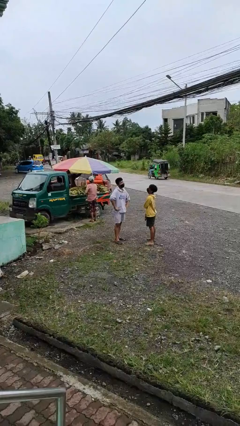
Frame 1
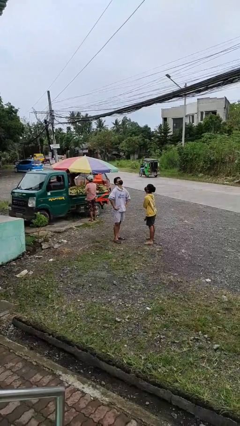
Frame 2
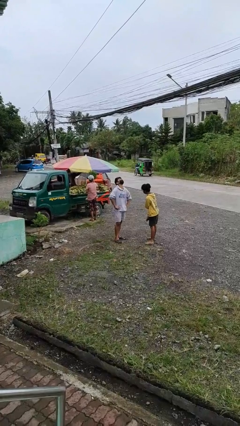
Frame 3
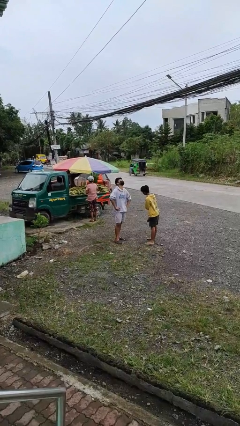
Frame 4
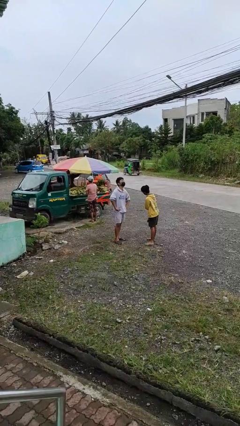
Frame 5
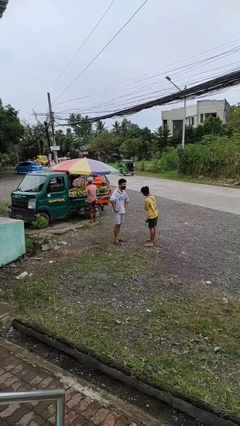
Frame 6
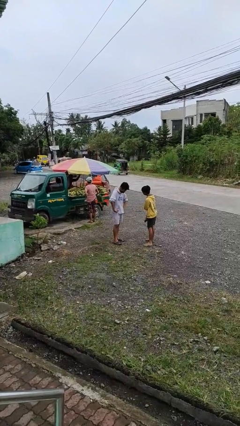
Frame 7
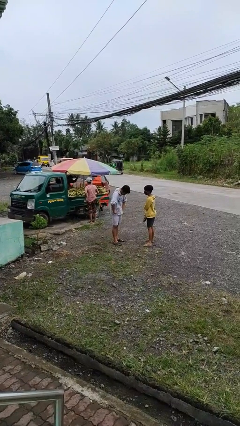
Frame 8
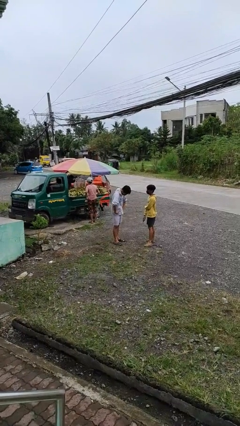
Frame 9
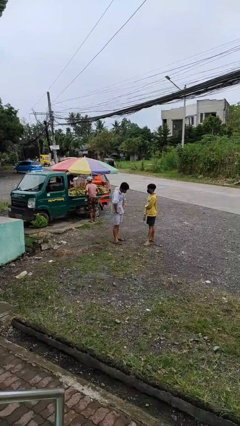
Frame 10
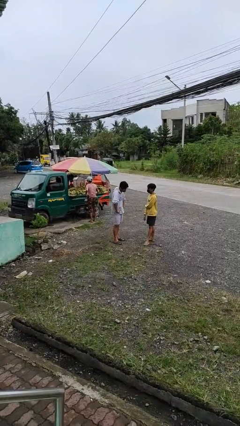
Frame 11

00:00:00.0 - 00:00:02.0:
person laughs with person

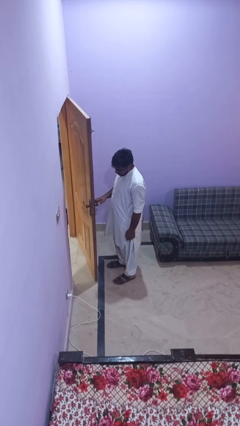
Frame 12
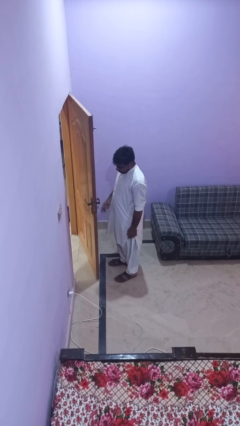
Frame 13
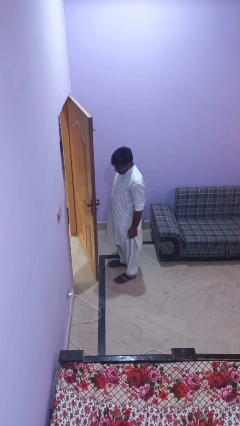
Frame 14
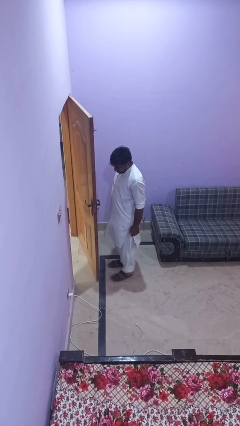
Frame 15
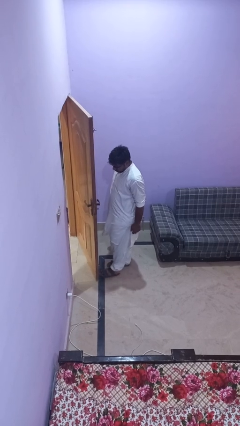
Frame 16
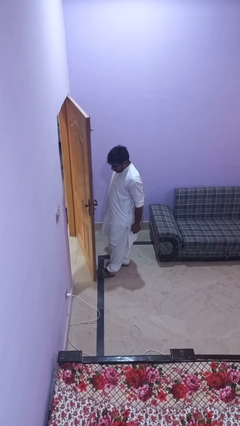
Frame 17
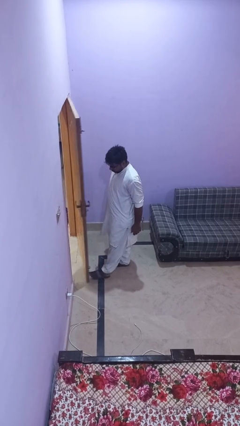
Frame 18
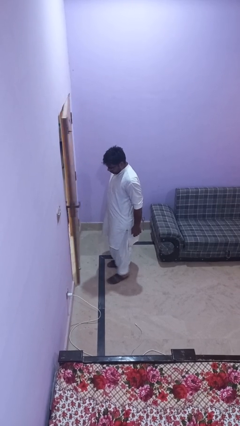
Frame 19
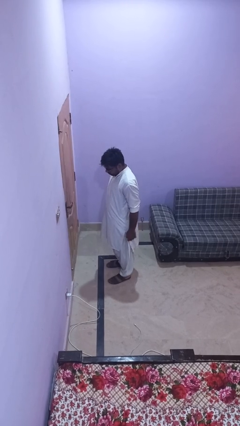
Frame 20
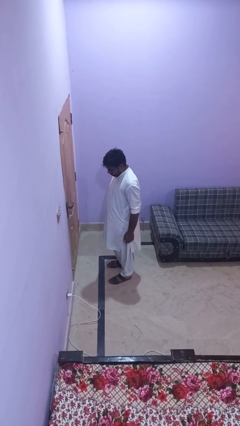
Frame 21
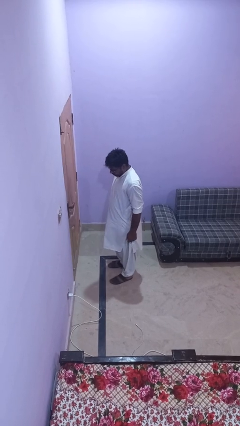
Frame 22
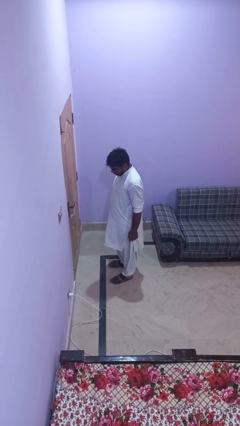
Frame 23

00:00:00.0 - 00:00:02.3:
person closes door with foot

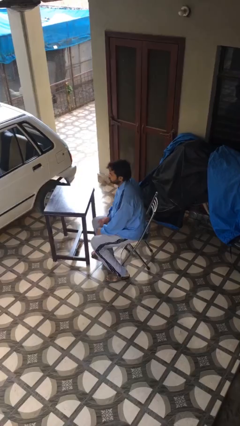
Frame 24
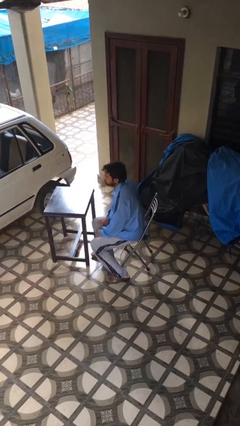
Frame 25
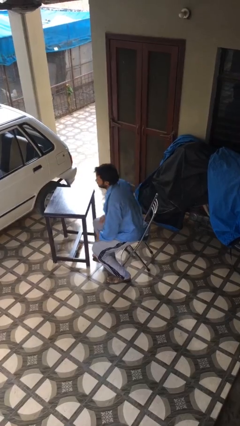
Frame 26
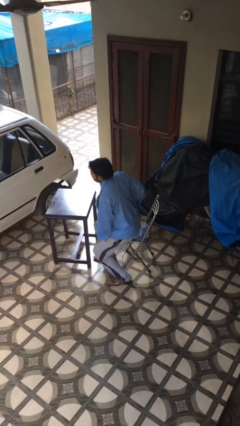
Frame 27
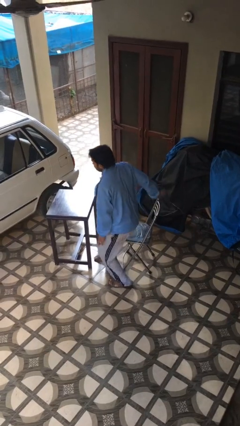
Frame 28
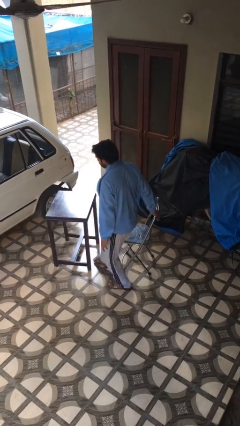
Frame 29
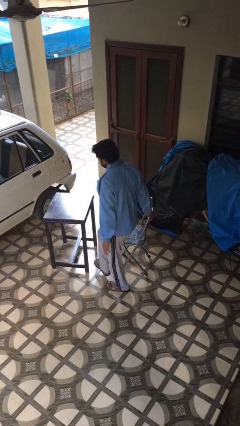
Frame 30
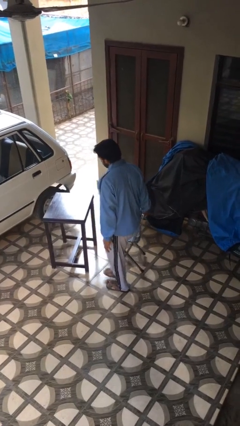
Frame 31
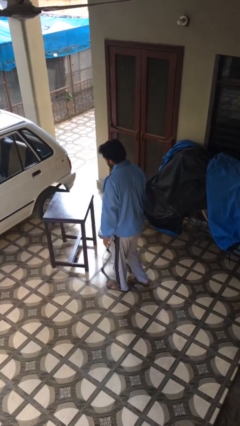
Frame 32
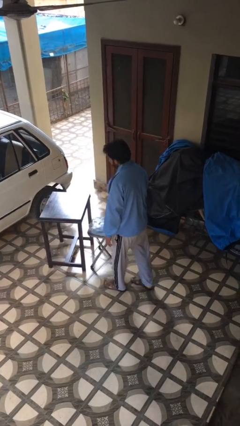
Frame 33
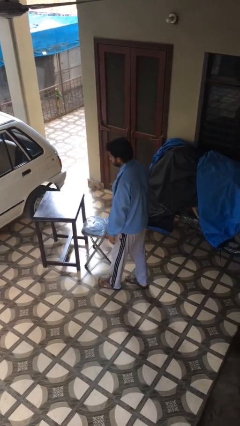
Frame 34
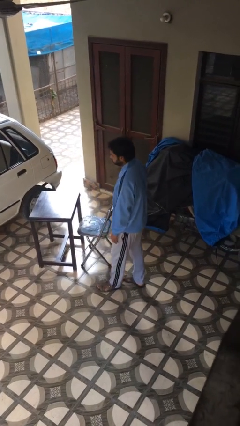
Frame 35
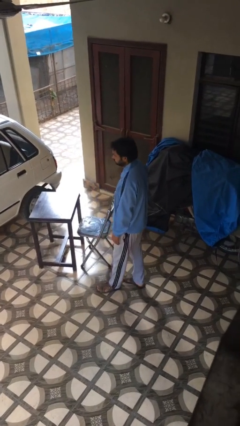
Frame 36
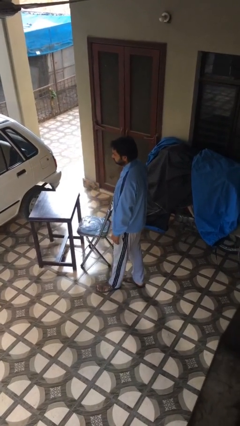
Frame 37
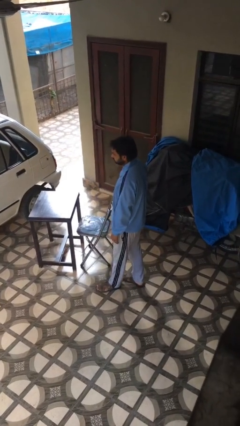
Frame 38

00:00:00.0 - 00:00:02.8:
person stands up

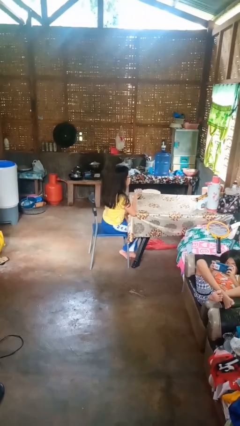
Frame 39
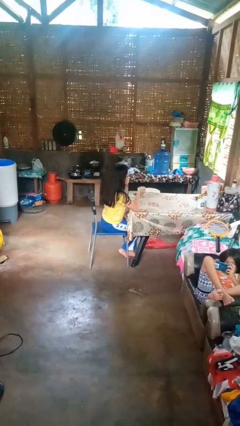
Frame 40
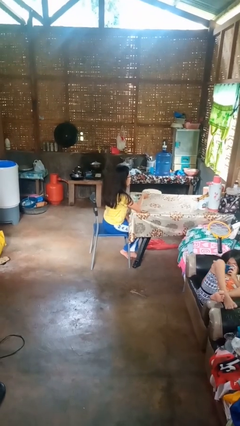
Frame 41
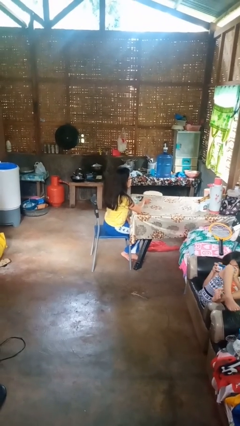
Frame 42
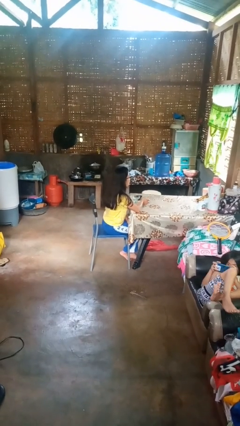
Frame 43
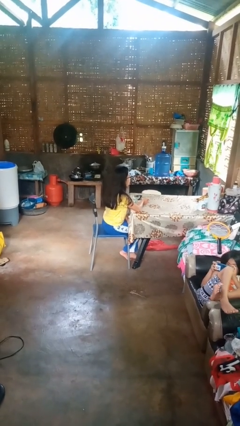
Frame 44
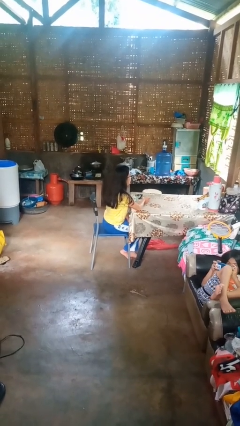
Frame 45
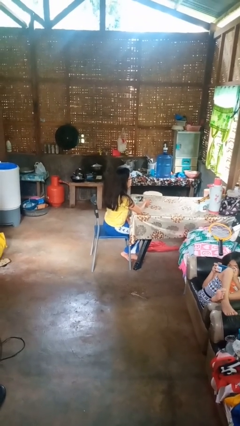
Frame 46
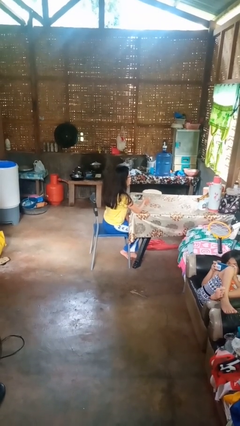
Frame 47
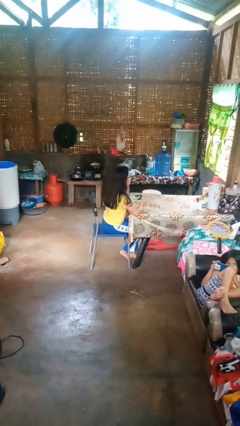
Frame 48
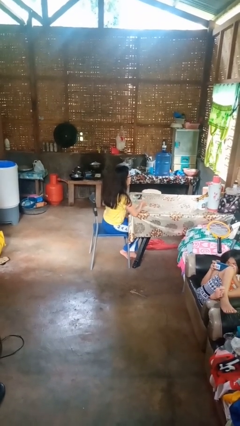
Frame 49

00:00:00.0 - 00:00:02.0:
person puts down object on table

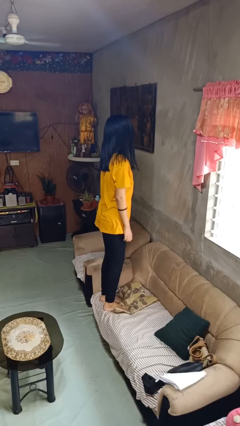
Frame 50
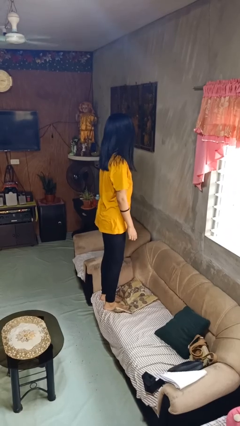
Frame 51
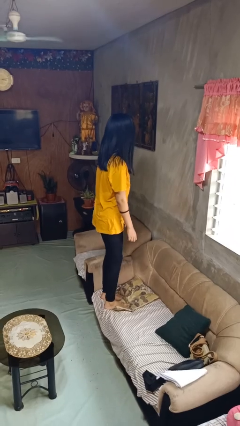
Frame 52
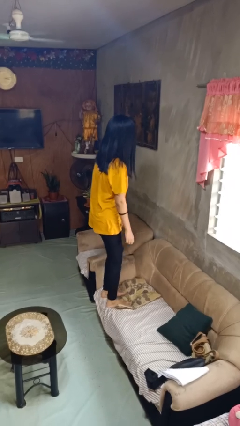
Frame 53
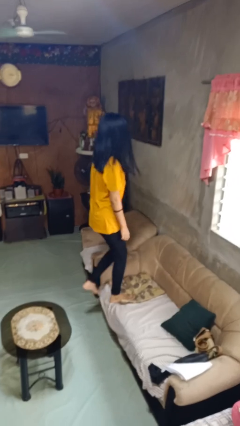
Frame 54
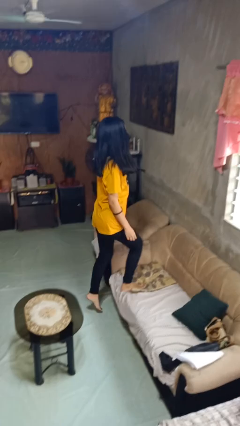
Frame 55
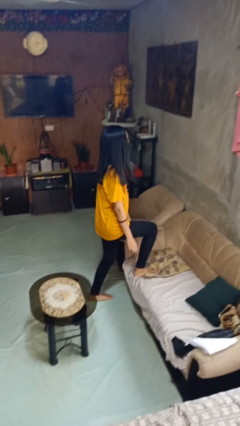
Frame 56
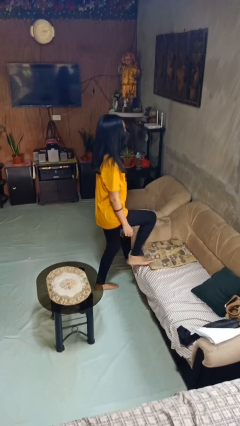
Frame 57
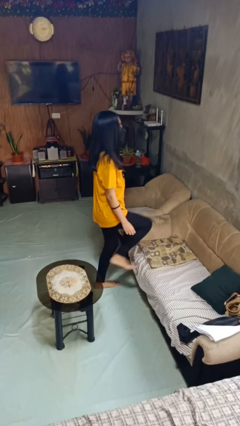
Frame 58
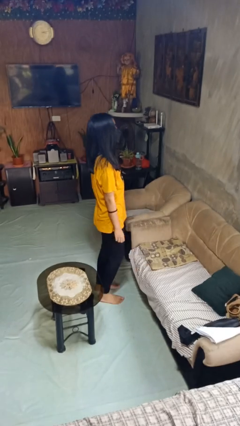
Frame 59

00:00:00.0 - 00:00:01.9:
person climbs off couch

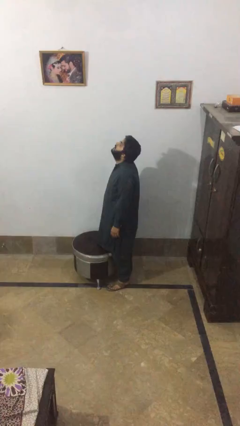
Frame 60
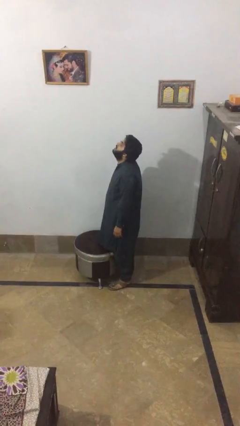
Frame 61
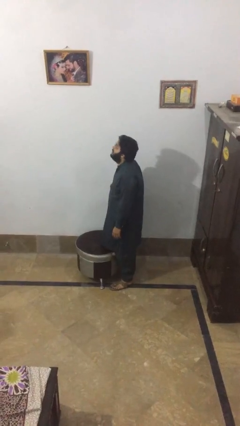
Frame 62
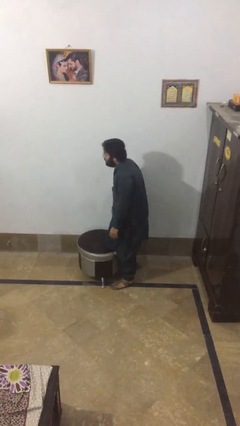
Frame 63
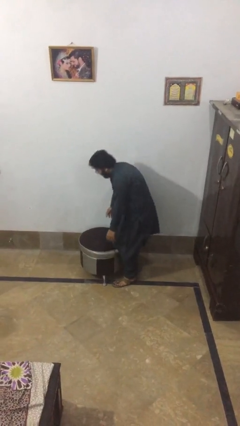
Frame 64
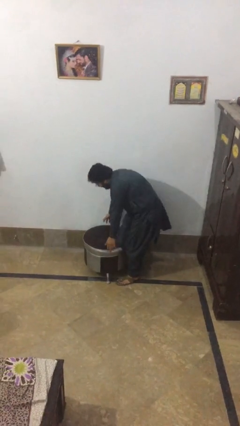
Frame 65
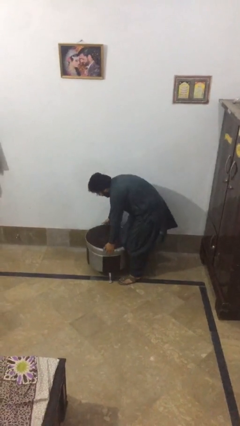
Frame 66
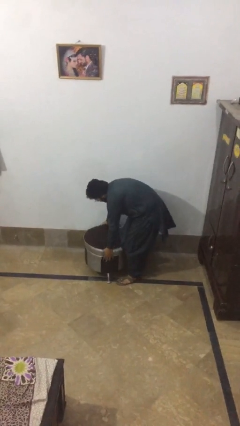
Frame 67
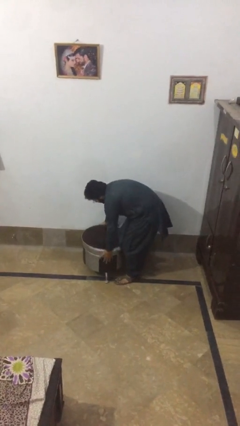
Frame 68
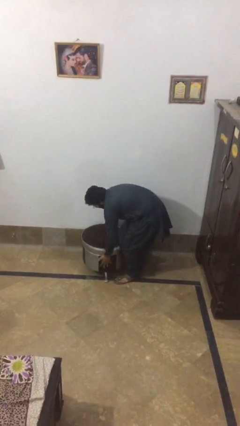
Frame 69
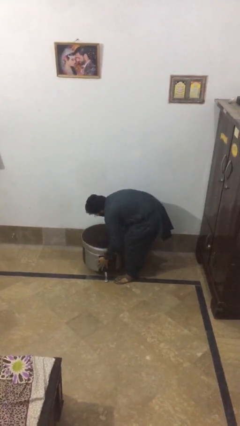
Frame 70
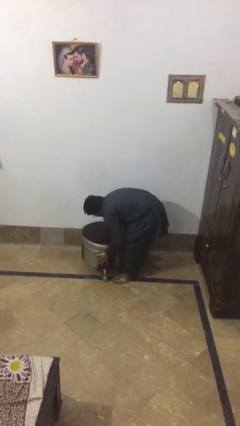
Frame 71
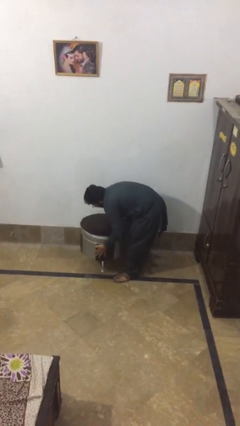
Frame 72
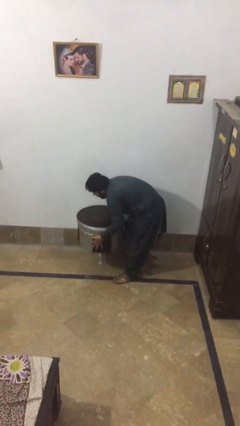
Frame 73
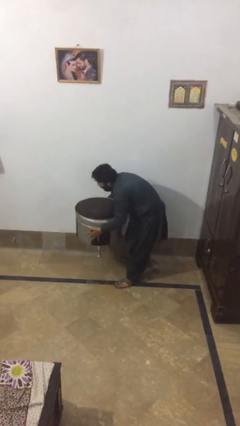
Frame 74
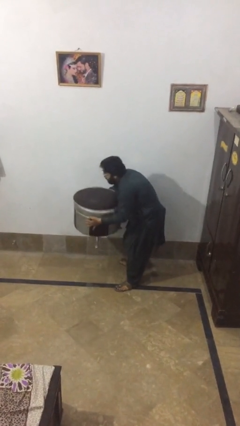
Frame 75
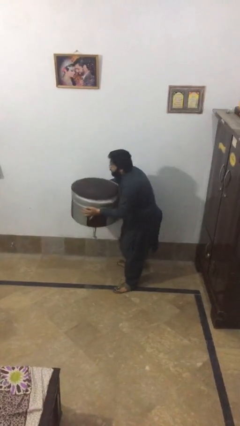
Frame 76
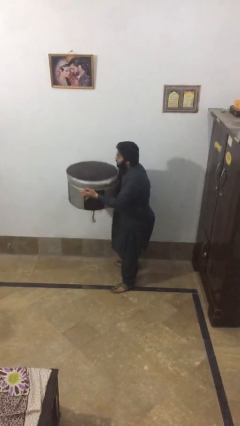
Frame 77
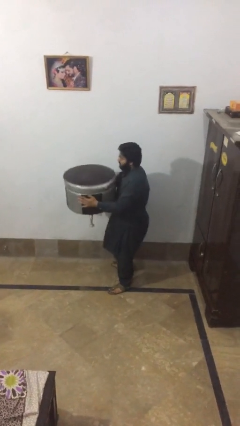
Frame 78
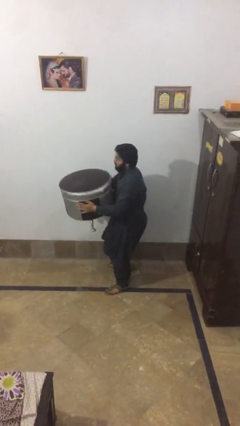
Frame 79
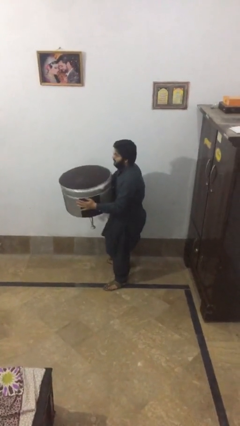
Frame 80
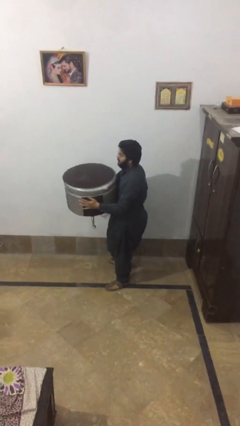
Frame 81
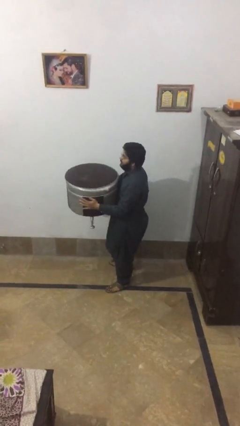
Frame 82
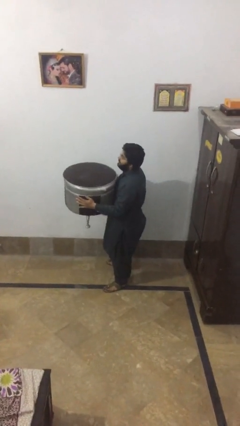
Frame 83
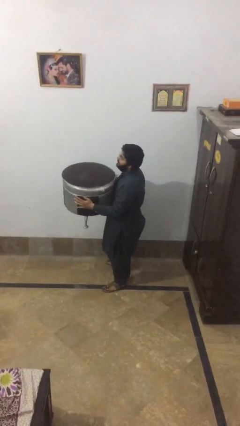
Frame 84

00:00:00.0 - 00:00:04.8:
person picks up object from floor

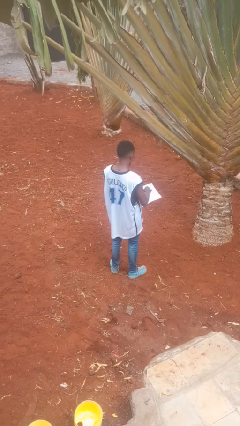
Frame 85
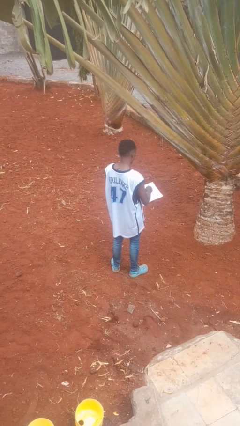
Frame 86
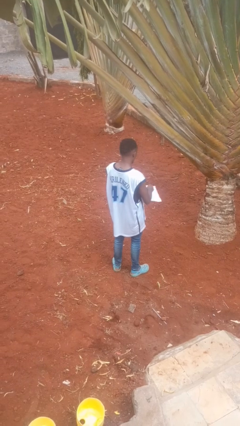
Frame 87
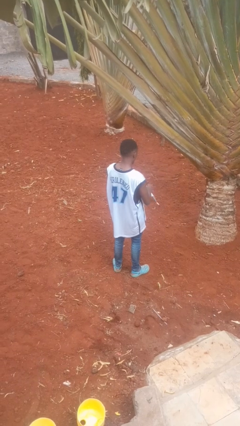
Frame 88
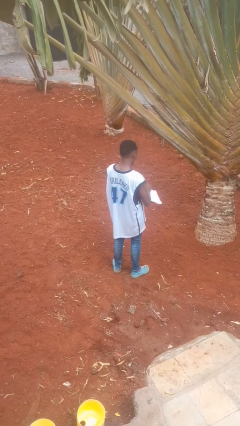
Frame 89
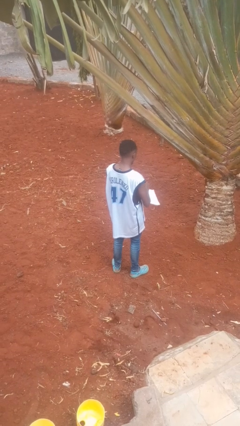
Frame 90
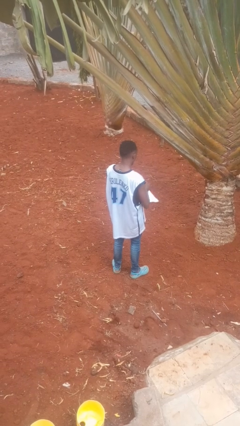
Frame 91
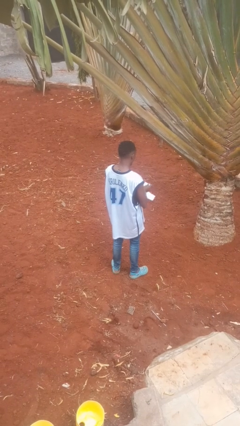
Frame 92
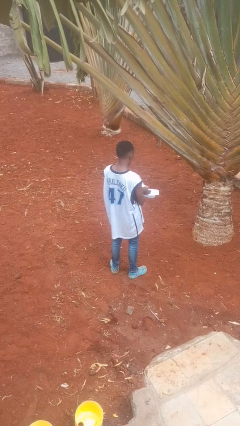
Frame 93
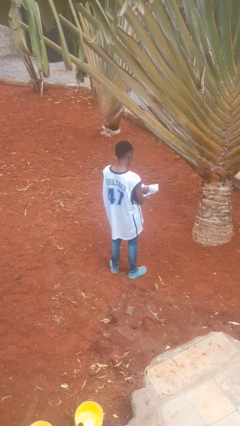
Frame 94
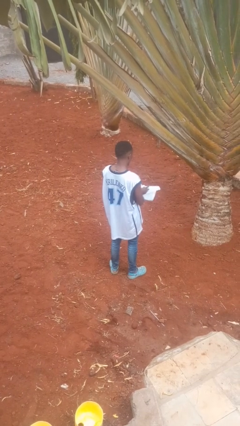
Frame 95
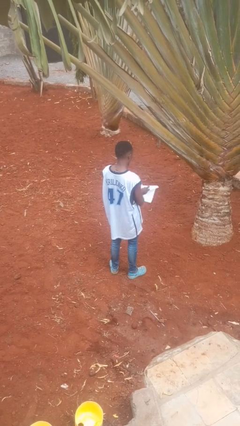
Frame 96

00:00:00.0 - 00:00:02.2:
person tears paper
